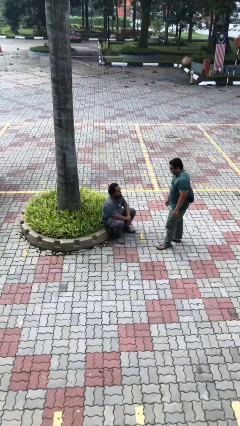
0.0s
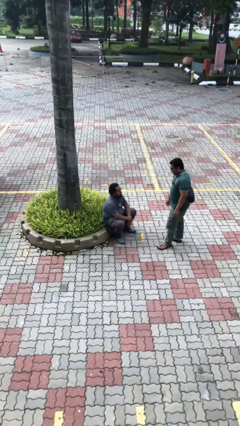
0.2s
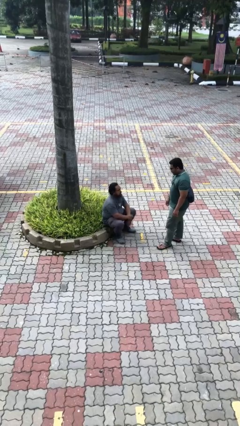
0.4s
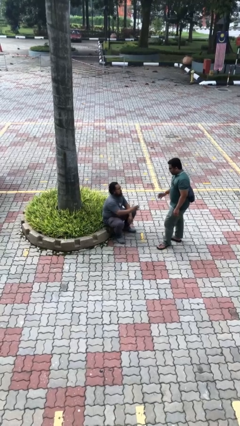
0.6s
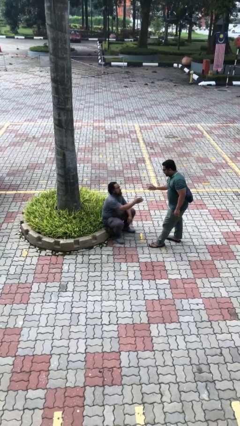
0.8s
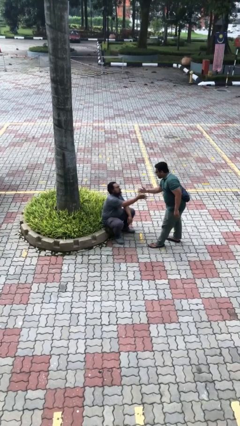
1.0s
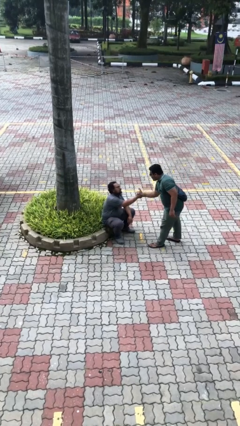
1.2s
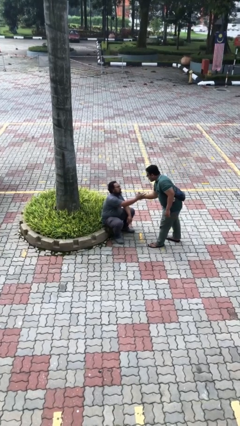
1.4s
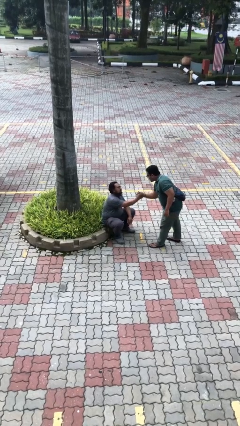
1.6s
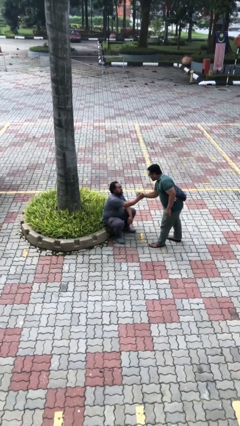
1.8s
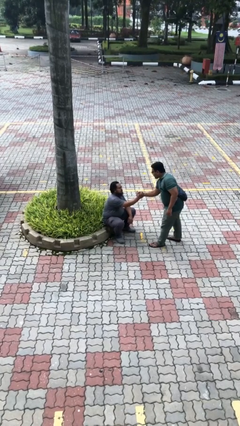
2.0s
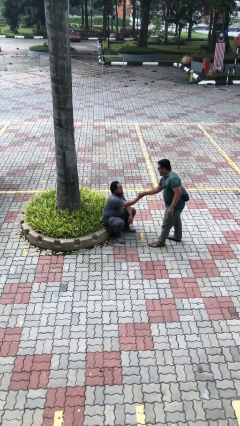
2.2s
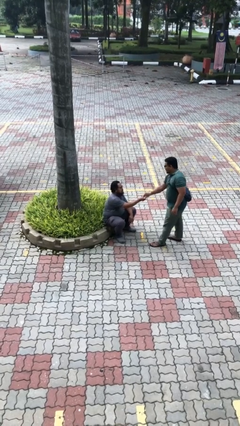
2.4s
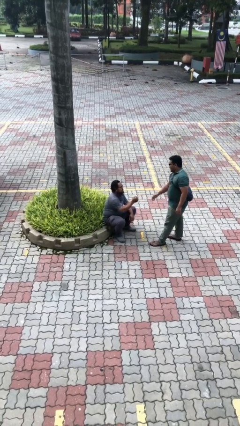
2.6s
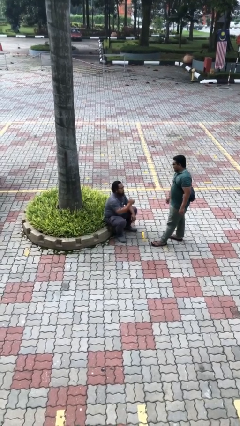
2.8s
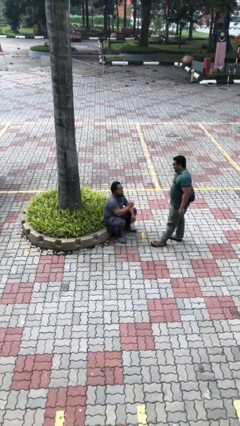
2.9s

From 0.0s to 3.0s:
person shakes hand

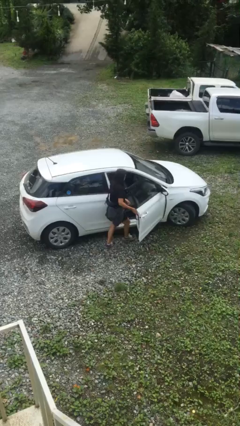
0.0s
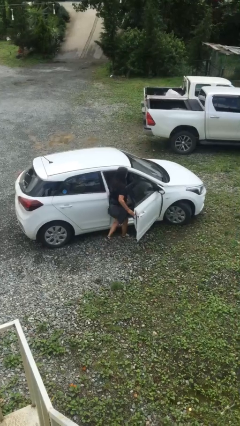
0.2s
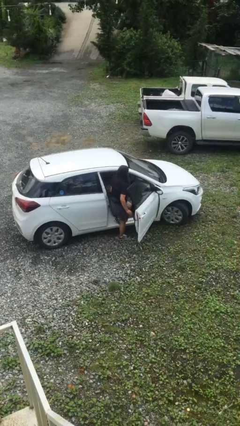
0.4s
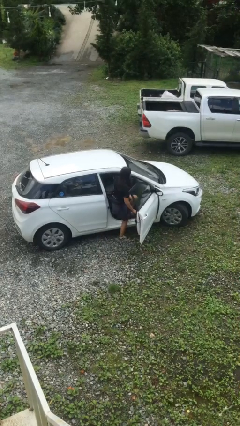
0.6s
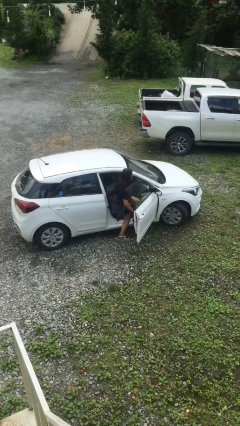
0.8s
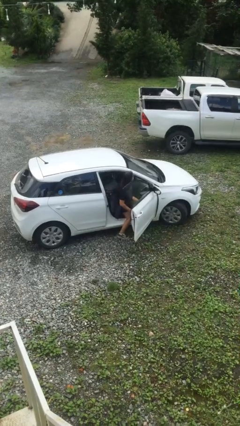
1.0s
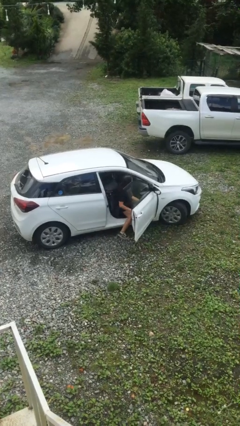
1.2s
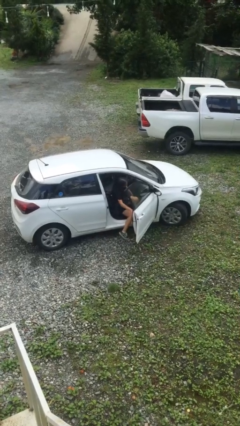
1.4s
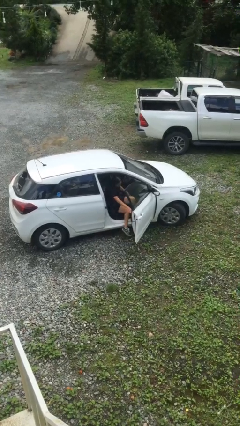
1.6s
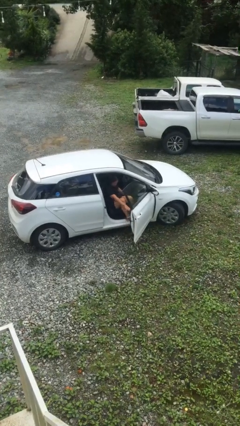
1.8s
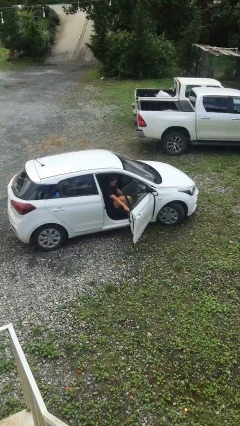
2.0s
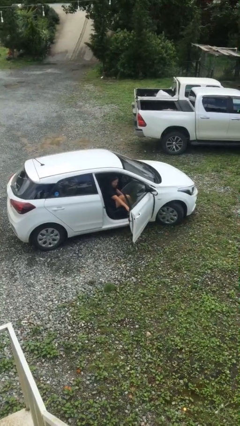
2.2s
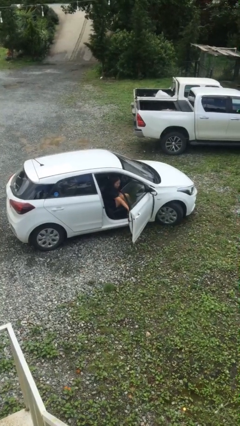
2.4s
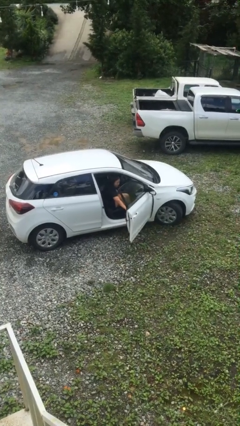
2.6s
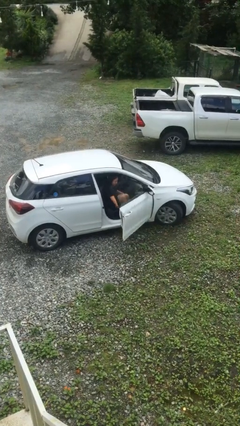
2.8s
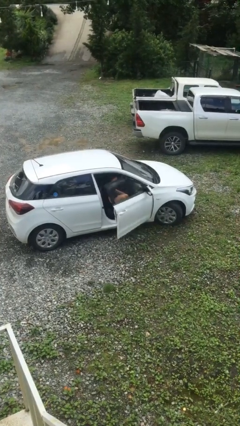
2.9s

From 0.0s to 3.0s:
person enters car

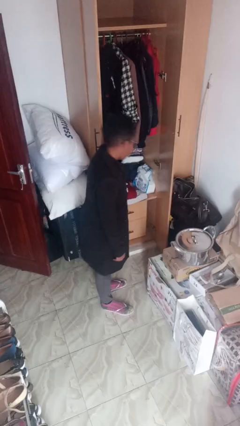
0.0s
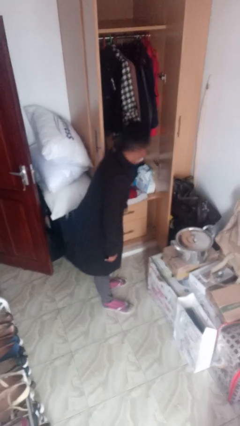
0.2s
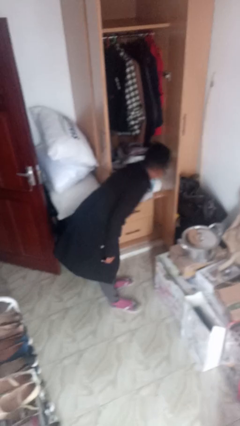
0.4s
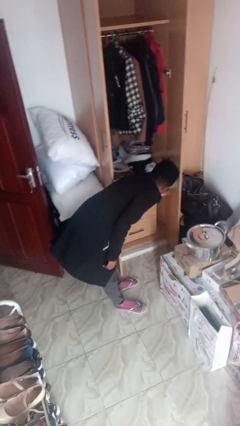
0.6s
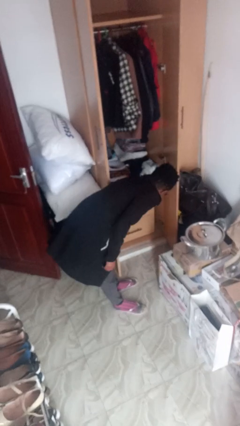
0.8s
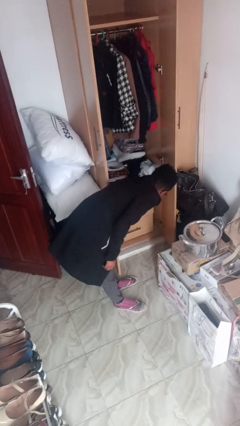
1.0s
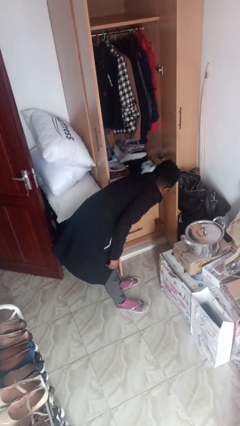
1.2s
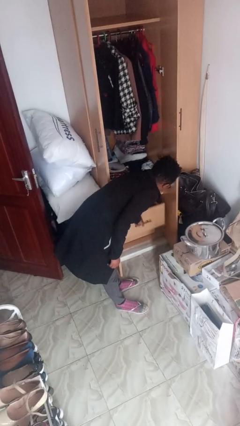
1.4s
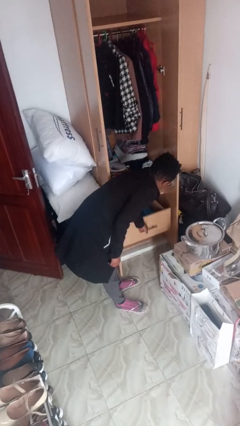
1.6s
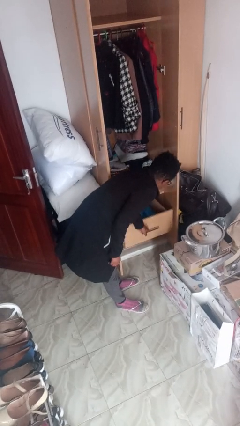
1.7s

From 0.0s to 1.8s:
person opens dresser drawer

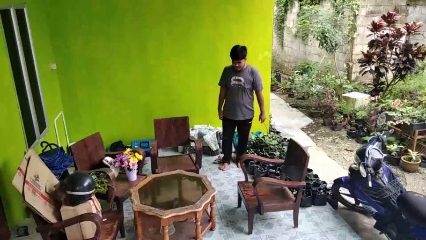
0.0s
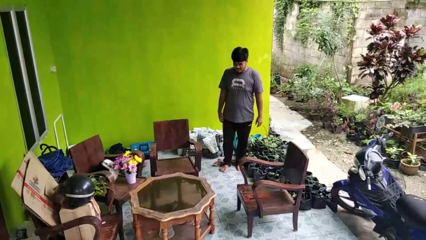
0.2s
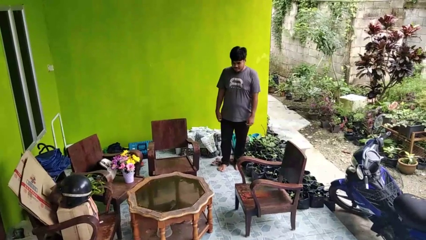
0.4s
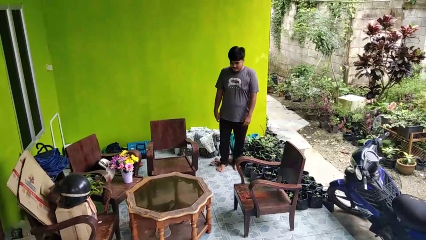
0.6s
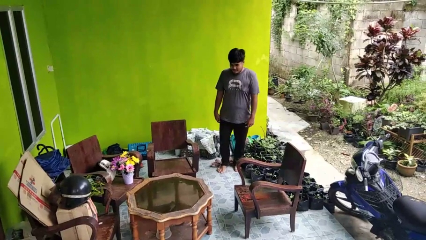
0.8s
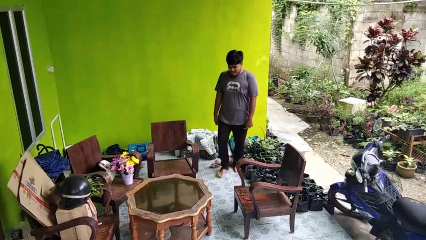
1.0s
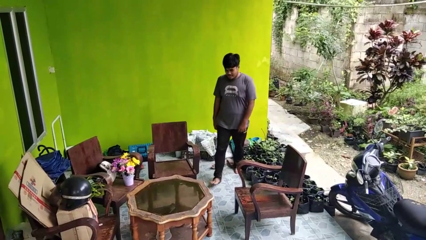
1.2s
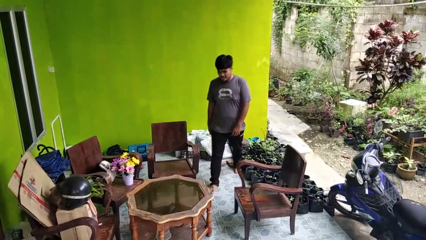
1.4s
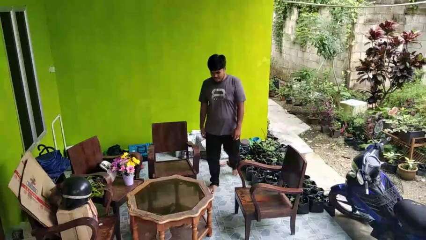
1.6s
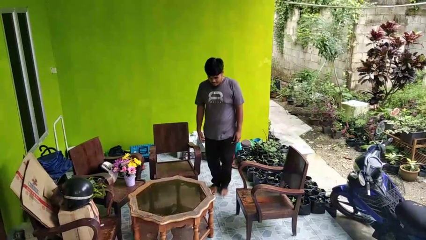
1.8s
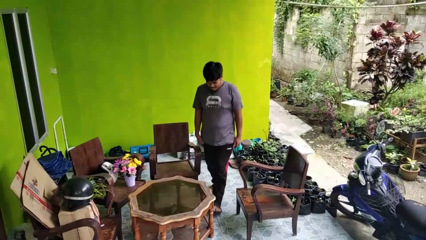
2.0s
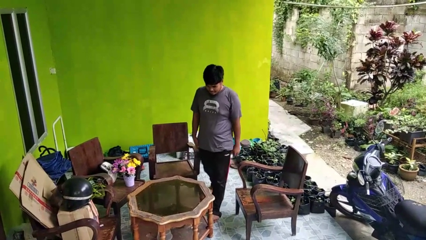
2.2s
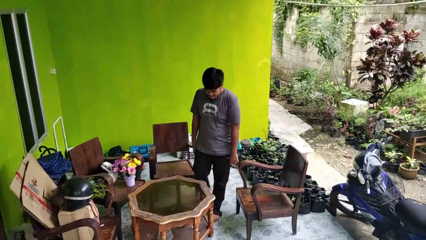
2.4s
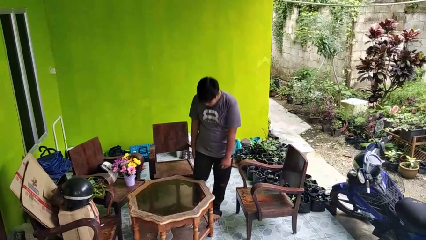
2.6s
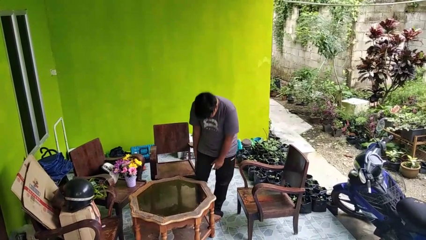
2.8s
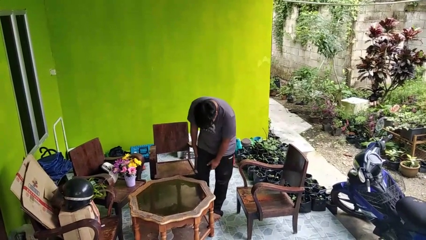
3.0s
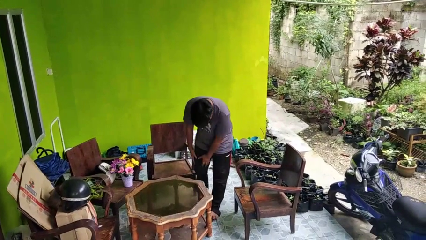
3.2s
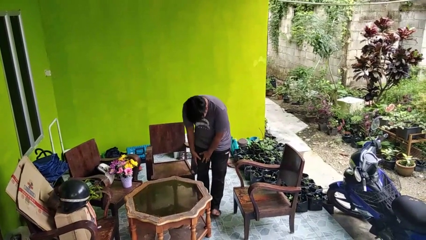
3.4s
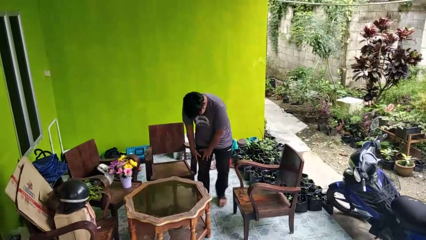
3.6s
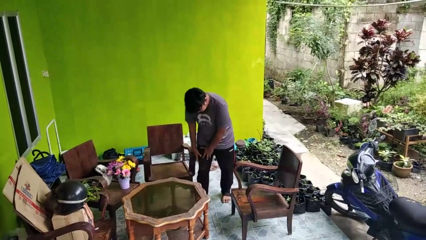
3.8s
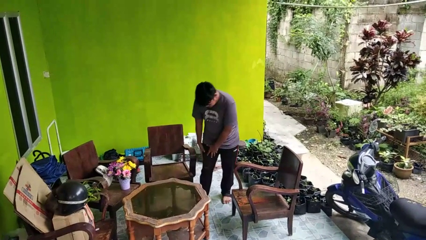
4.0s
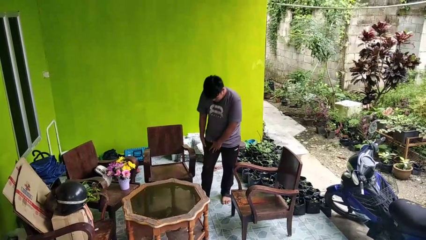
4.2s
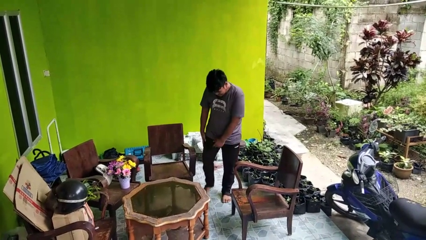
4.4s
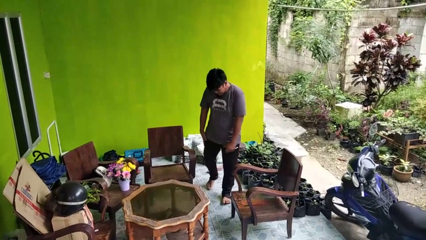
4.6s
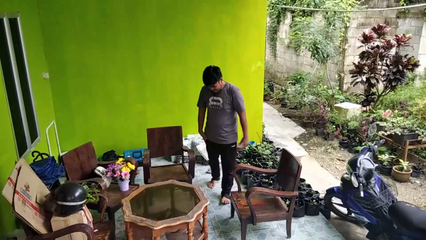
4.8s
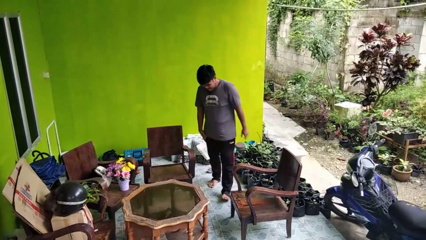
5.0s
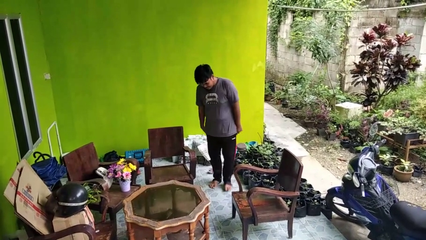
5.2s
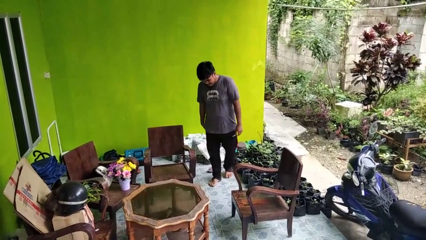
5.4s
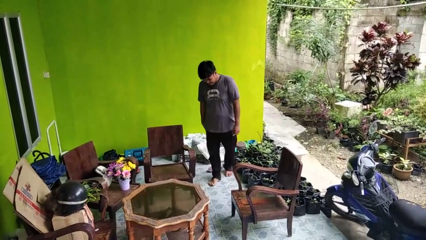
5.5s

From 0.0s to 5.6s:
person bumps into table

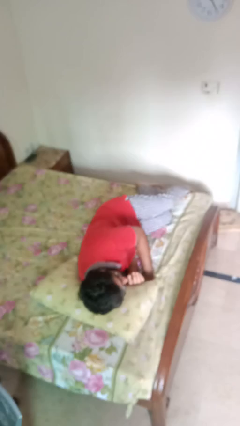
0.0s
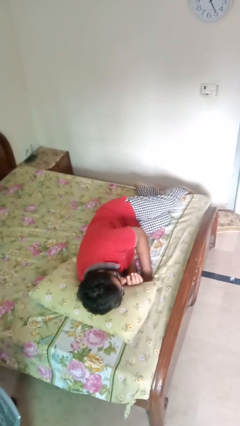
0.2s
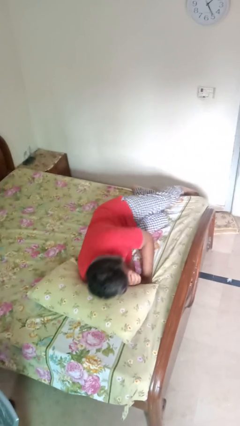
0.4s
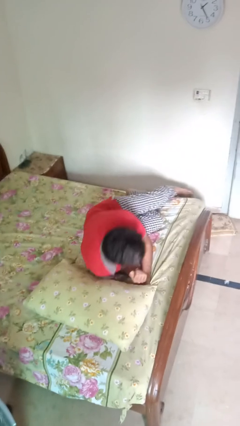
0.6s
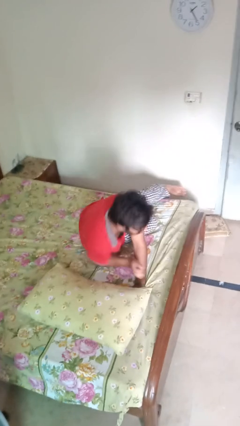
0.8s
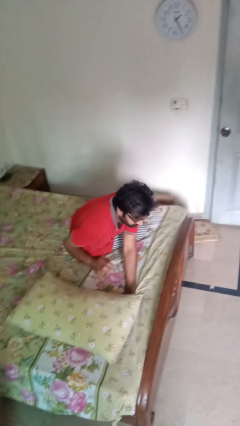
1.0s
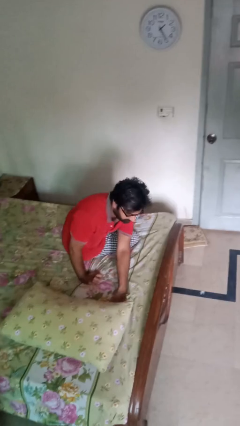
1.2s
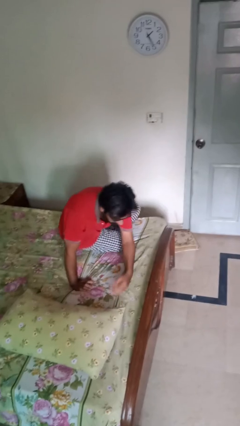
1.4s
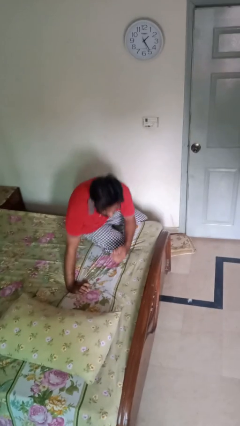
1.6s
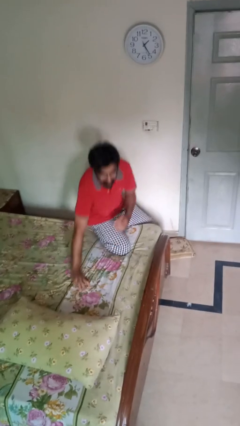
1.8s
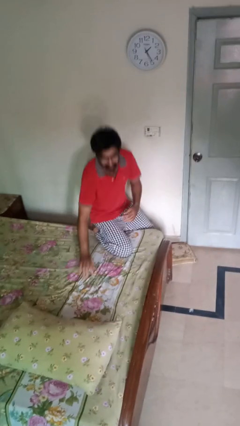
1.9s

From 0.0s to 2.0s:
person stands up

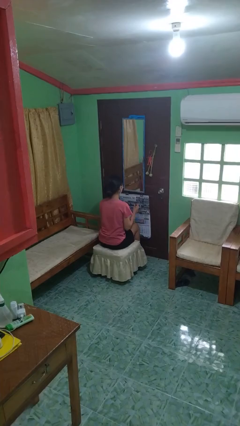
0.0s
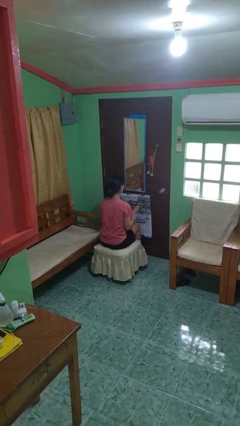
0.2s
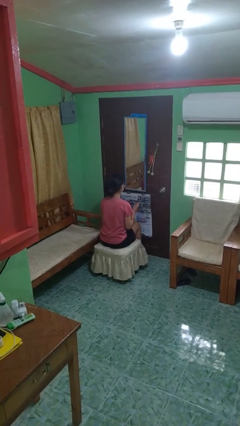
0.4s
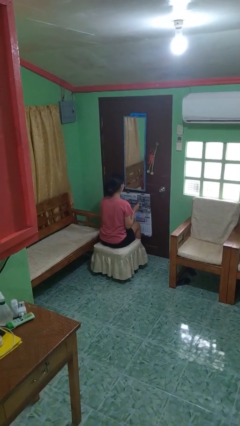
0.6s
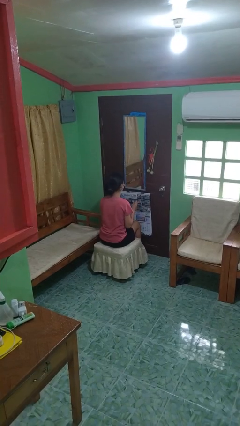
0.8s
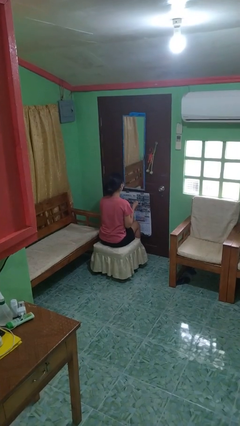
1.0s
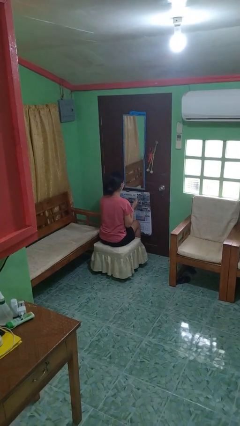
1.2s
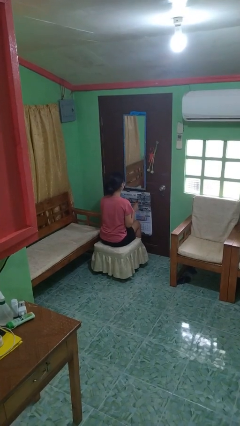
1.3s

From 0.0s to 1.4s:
person snaps fingers

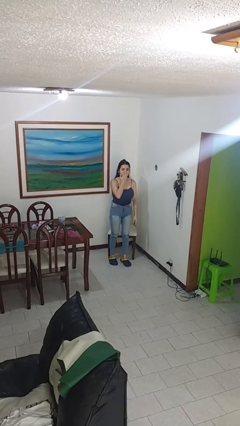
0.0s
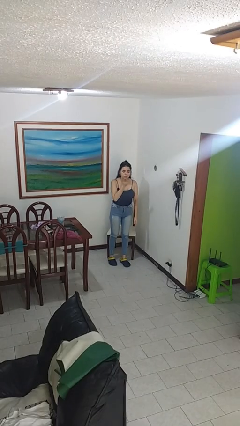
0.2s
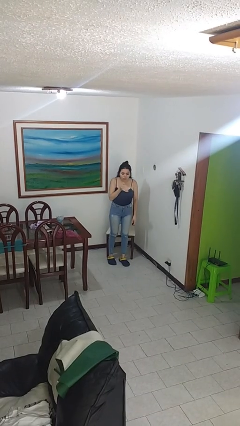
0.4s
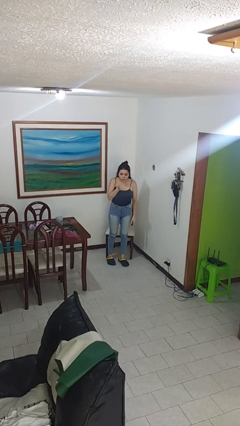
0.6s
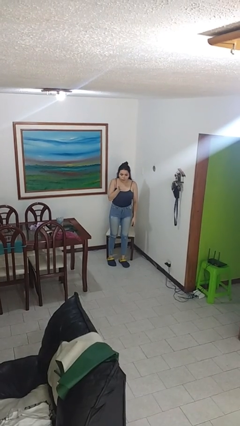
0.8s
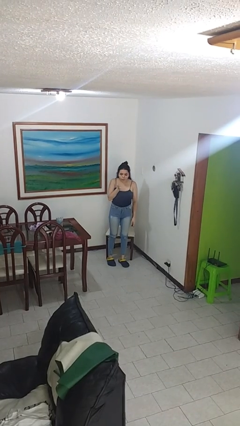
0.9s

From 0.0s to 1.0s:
person gestures blow kiss
